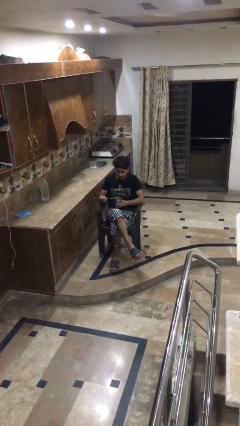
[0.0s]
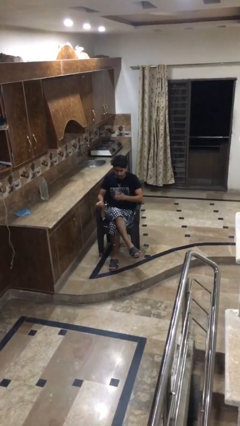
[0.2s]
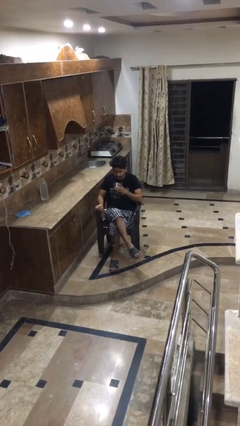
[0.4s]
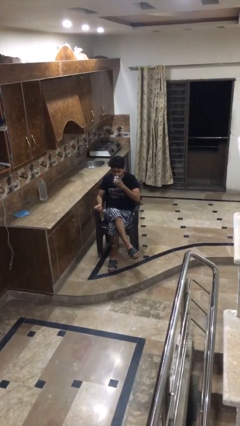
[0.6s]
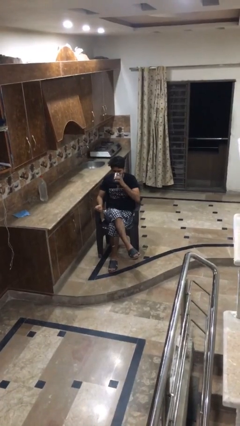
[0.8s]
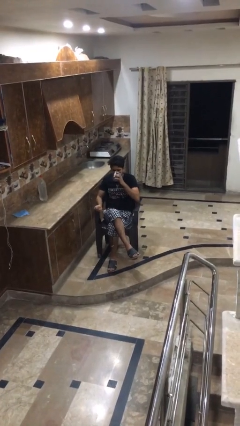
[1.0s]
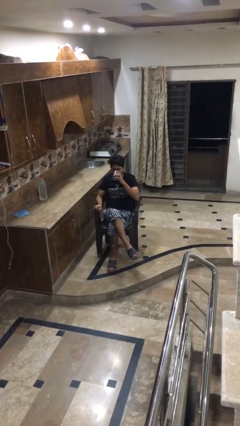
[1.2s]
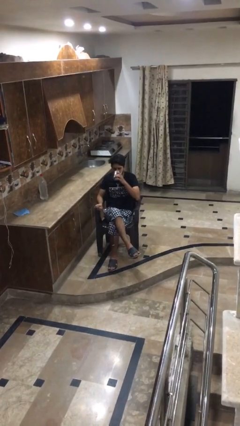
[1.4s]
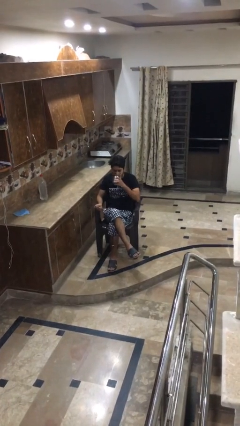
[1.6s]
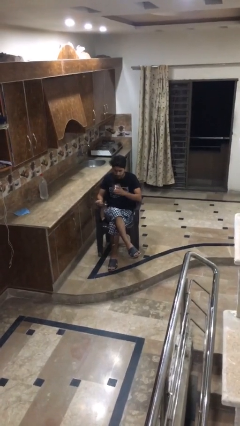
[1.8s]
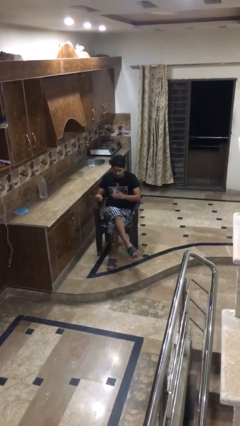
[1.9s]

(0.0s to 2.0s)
person drinks from mug

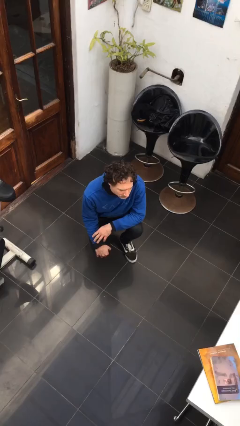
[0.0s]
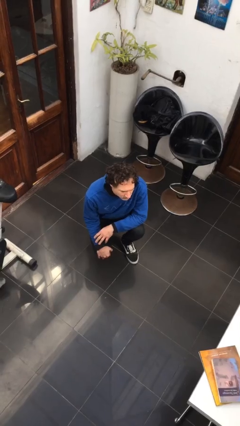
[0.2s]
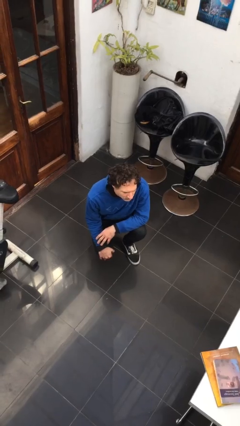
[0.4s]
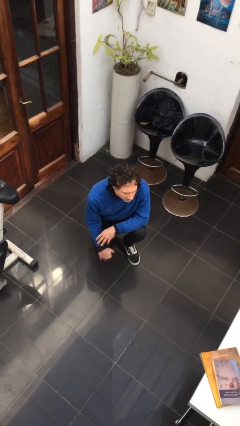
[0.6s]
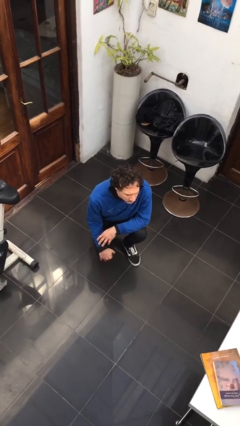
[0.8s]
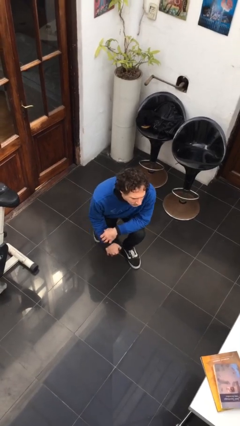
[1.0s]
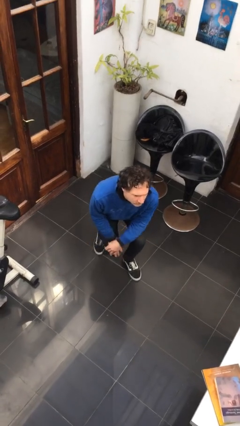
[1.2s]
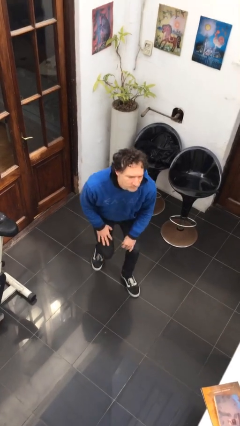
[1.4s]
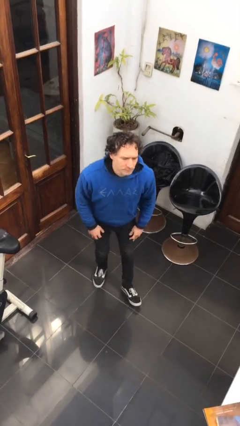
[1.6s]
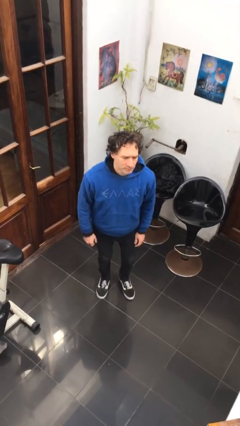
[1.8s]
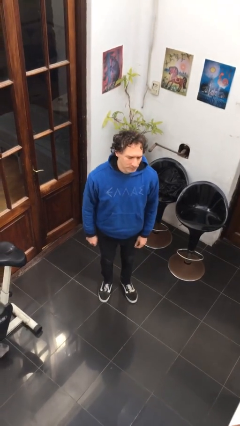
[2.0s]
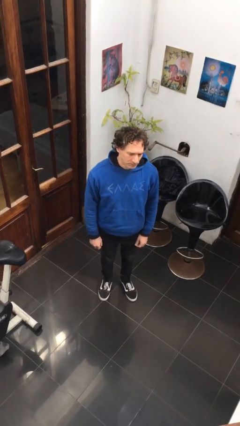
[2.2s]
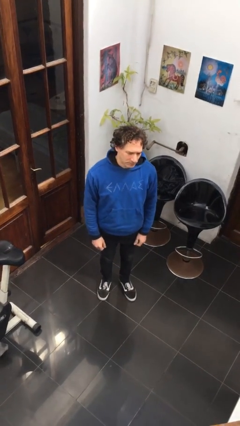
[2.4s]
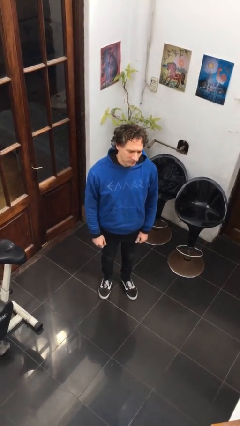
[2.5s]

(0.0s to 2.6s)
person stands up

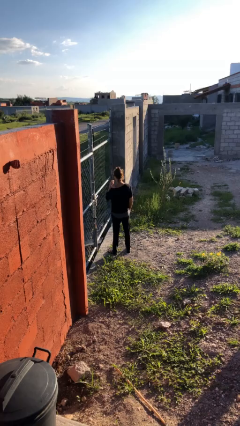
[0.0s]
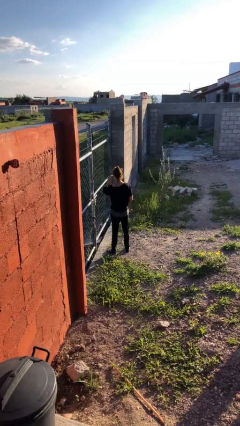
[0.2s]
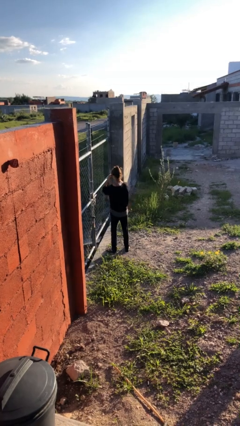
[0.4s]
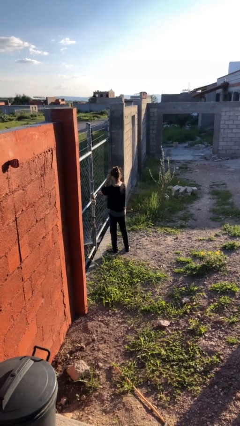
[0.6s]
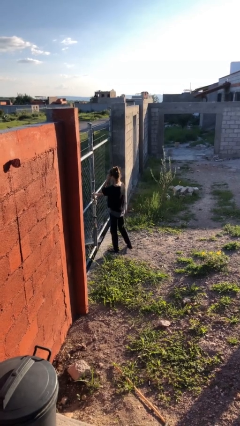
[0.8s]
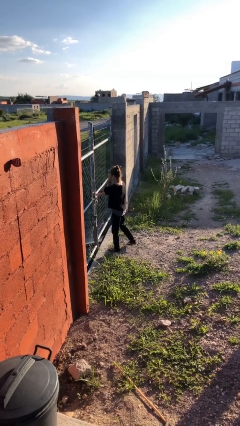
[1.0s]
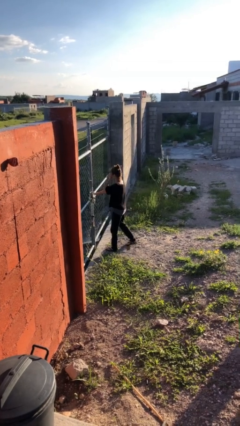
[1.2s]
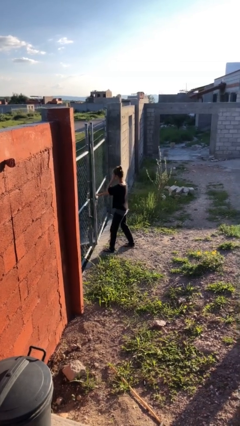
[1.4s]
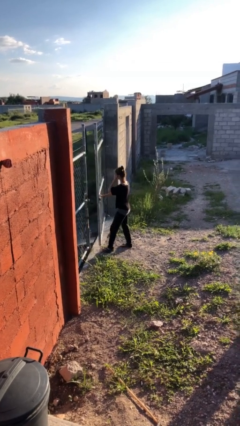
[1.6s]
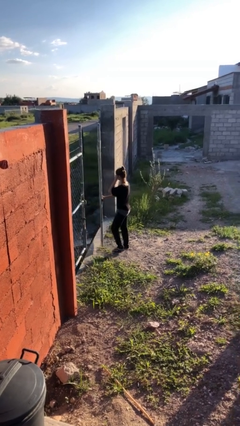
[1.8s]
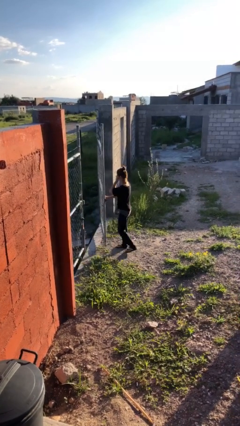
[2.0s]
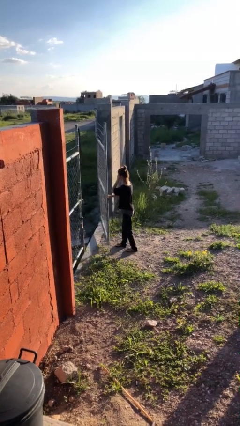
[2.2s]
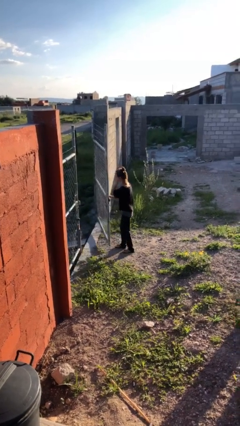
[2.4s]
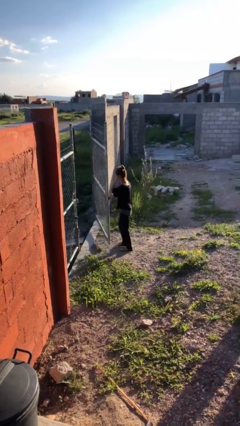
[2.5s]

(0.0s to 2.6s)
person opens gate

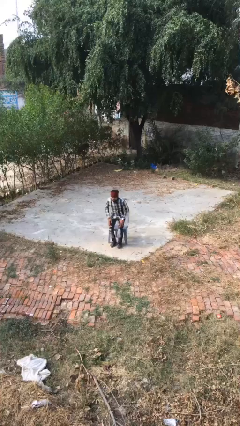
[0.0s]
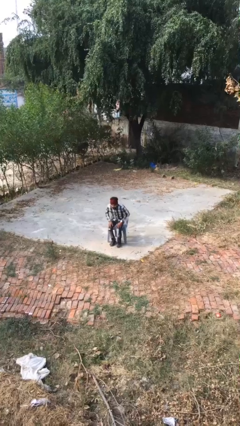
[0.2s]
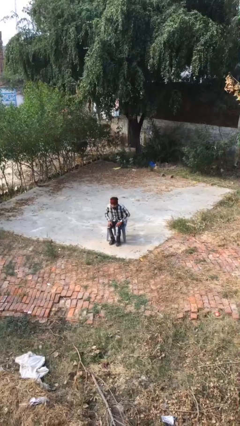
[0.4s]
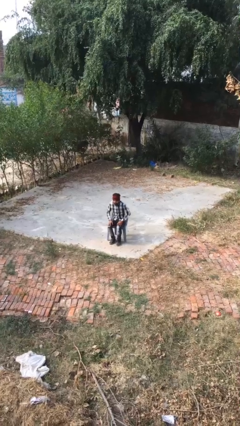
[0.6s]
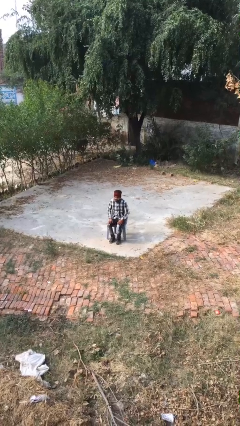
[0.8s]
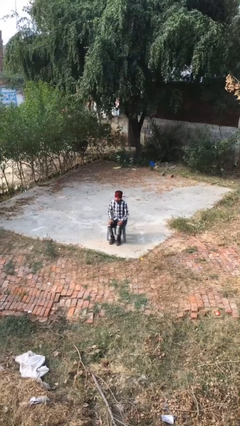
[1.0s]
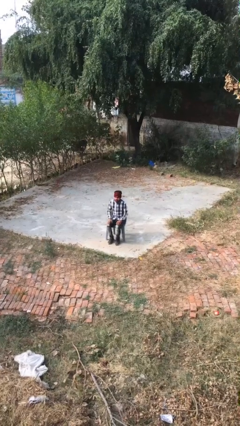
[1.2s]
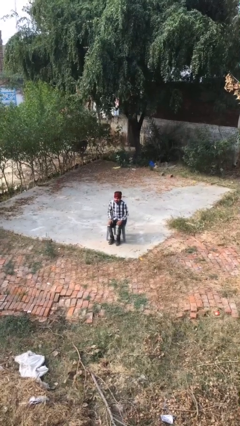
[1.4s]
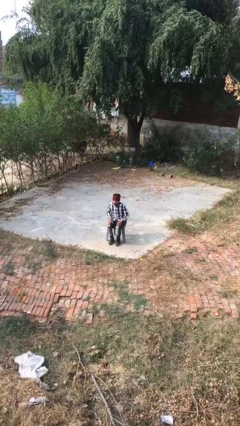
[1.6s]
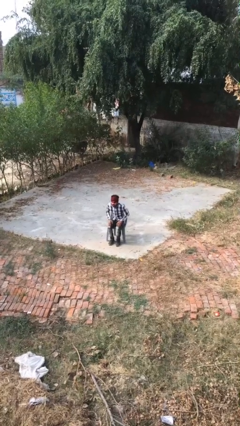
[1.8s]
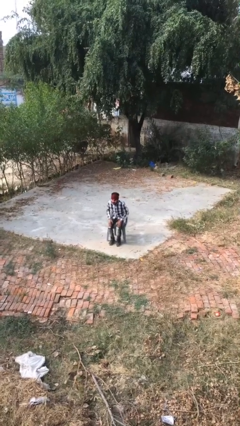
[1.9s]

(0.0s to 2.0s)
person sits down

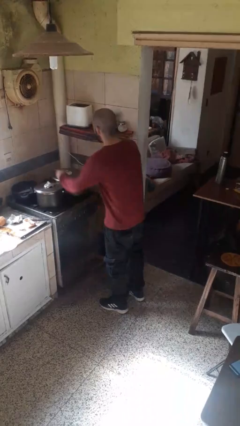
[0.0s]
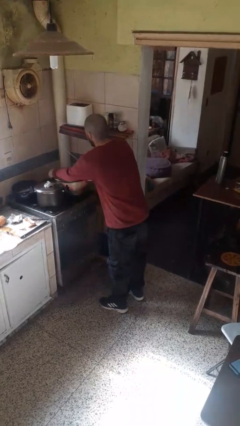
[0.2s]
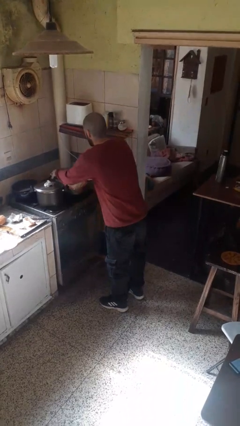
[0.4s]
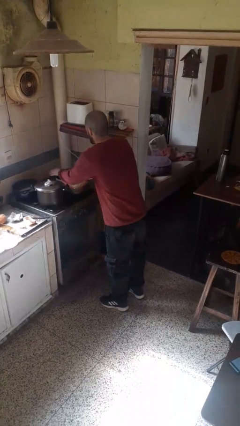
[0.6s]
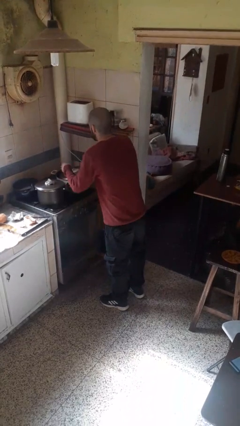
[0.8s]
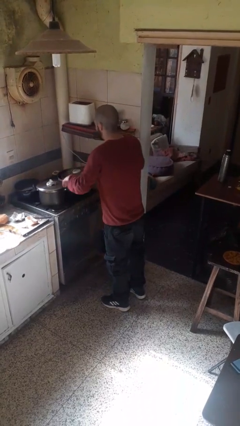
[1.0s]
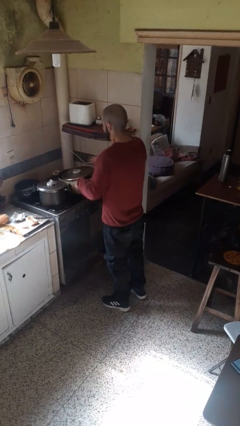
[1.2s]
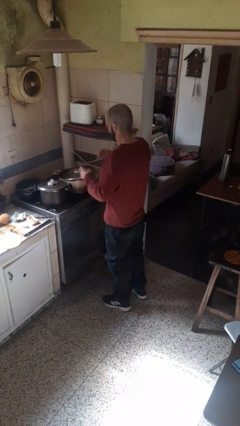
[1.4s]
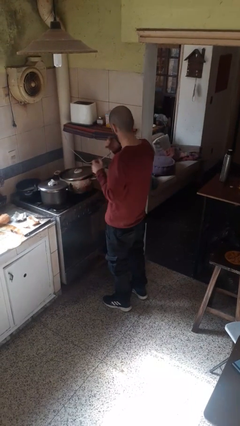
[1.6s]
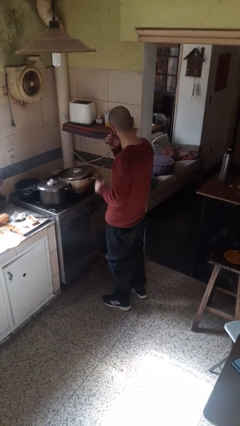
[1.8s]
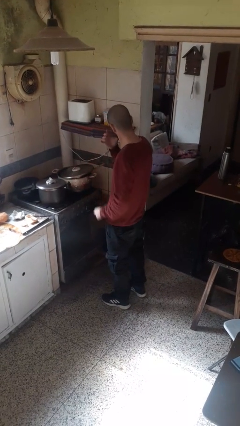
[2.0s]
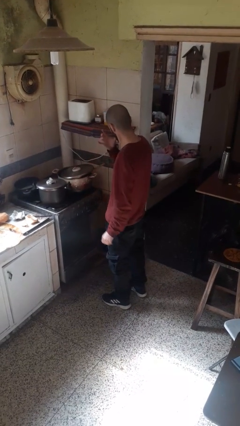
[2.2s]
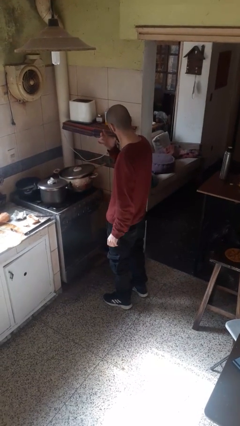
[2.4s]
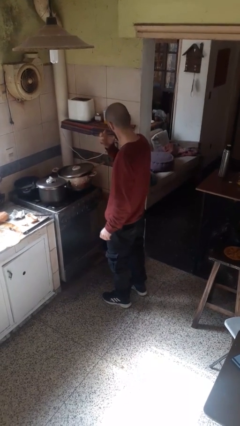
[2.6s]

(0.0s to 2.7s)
person burns hand

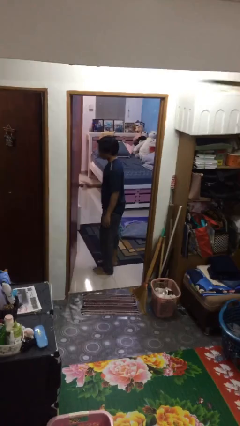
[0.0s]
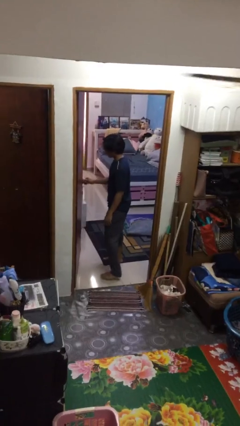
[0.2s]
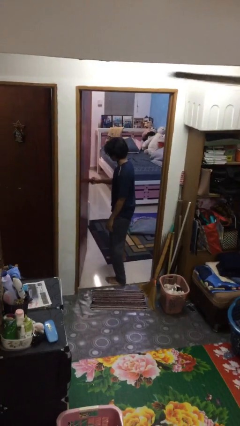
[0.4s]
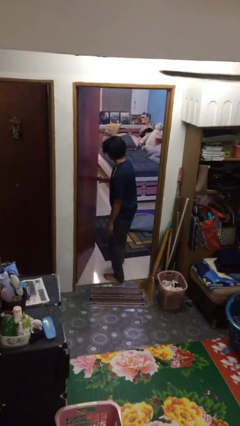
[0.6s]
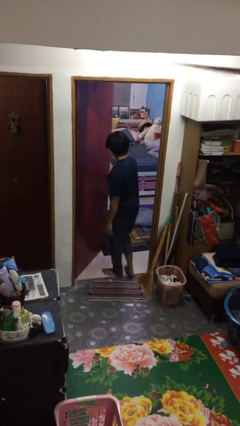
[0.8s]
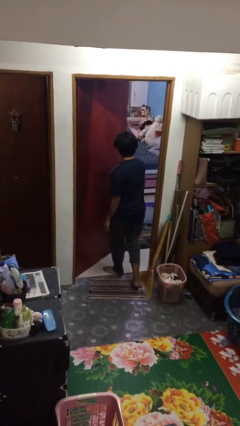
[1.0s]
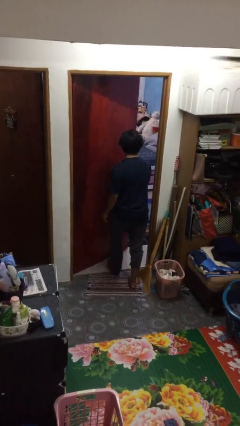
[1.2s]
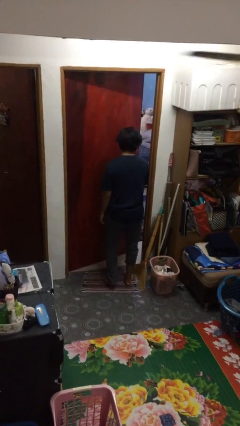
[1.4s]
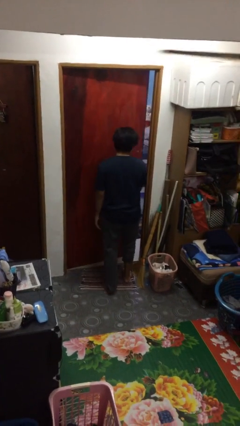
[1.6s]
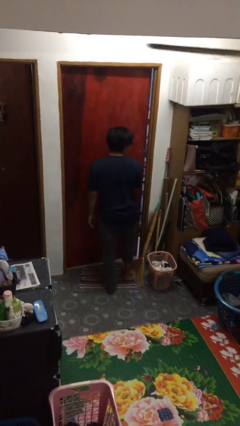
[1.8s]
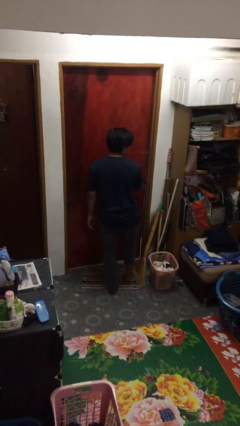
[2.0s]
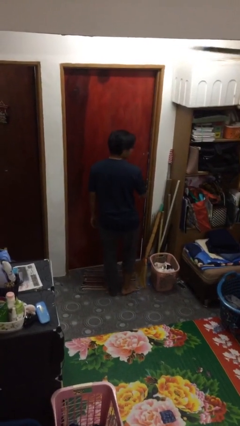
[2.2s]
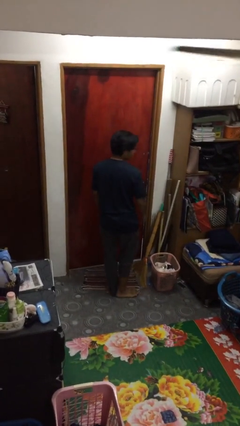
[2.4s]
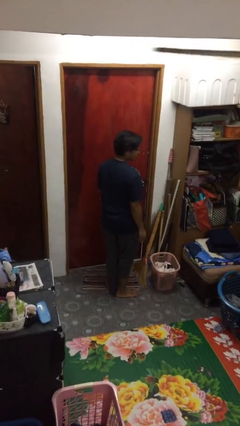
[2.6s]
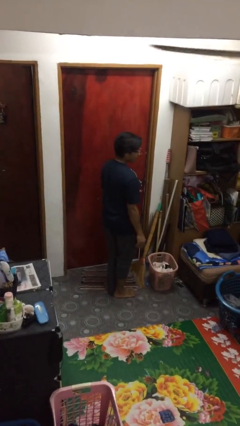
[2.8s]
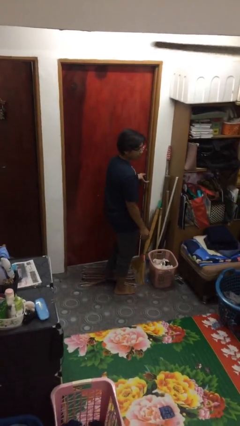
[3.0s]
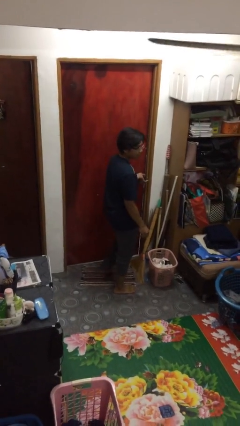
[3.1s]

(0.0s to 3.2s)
person closes facility door

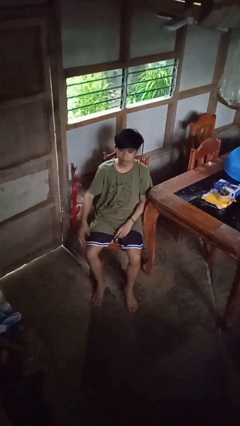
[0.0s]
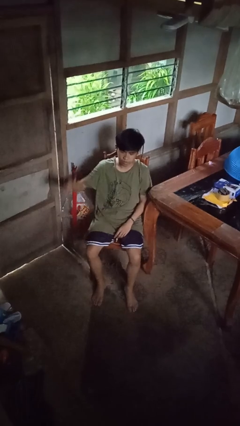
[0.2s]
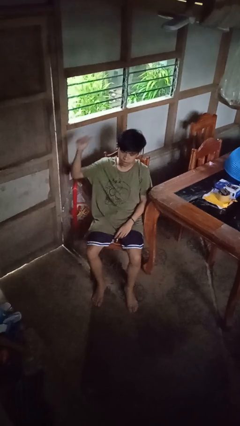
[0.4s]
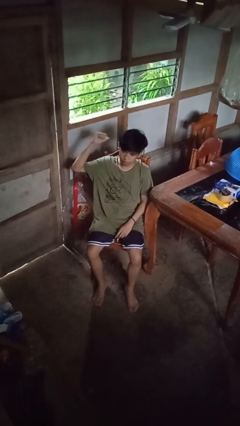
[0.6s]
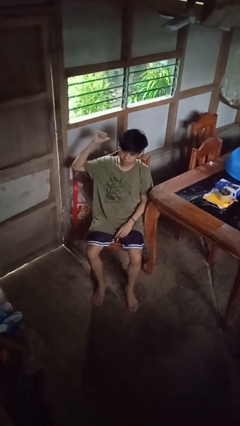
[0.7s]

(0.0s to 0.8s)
person gestures behind me

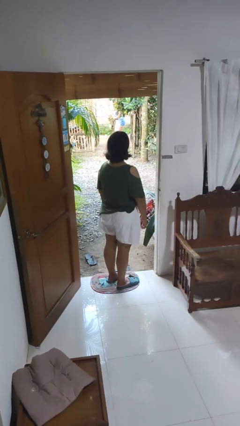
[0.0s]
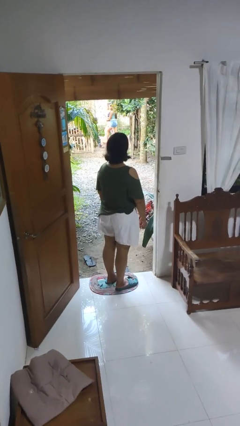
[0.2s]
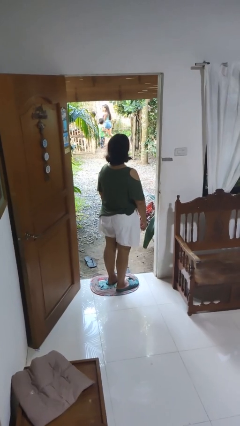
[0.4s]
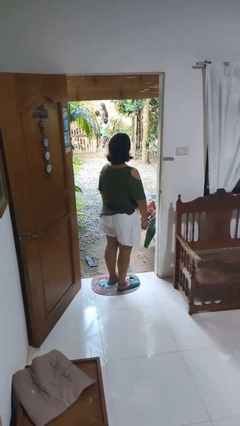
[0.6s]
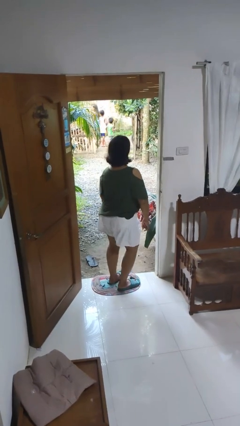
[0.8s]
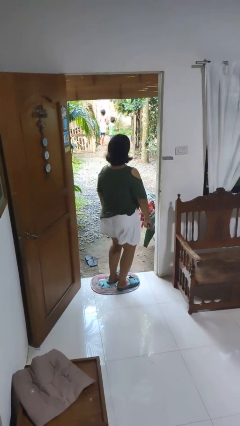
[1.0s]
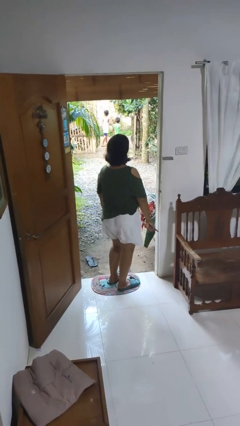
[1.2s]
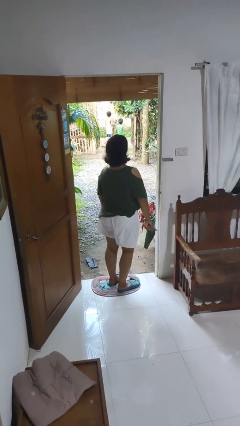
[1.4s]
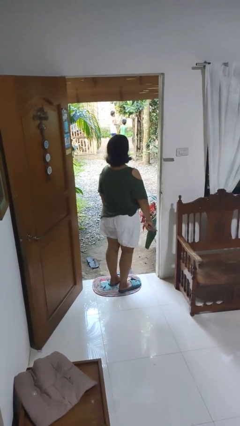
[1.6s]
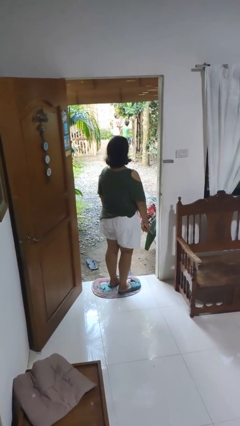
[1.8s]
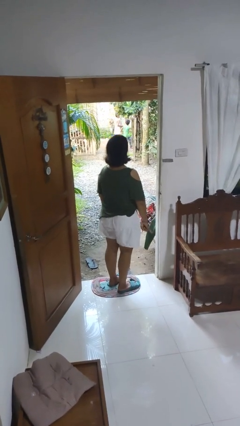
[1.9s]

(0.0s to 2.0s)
person wiggles hips
